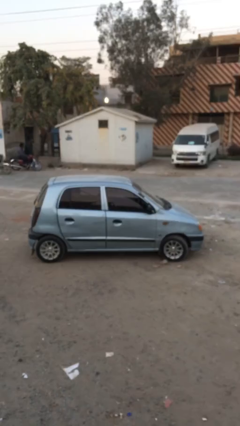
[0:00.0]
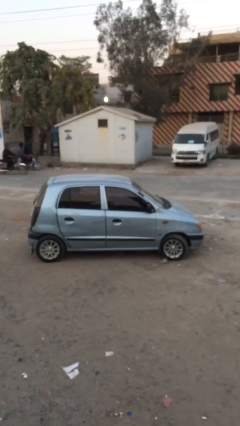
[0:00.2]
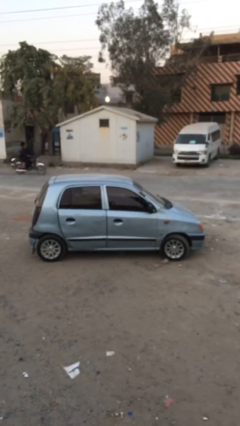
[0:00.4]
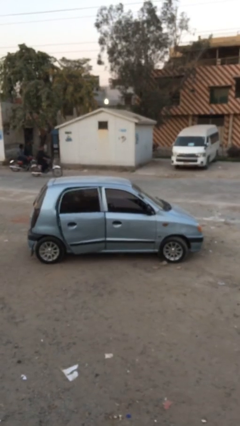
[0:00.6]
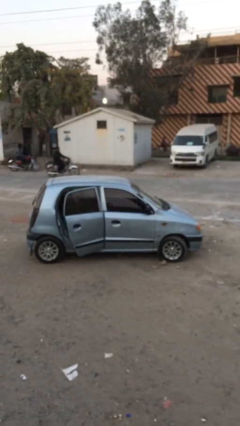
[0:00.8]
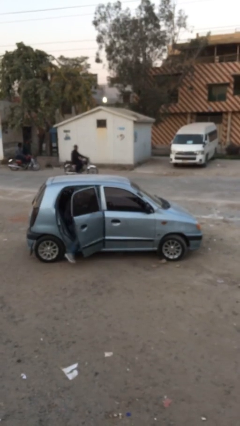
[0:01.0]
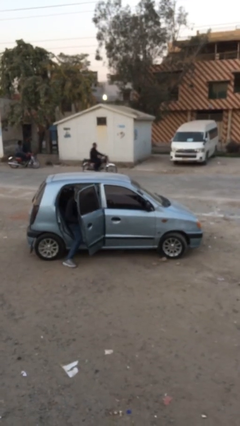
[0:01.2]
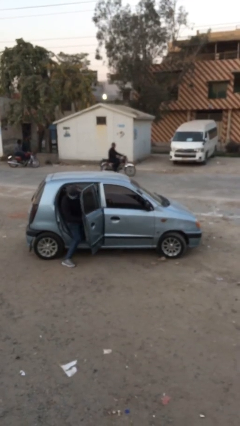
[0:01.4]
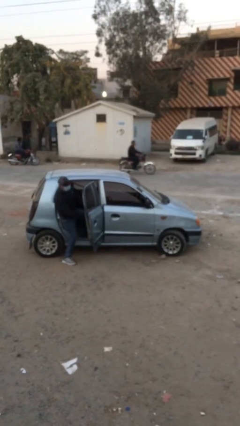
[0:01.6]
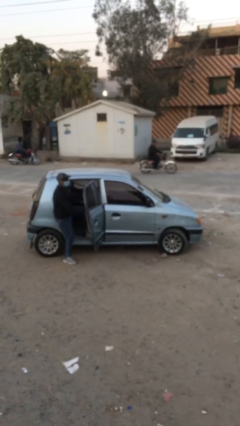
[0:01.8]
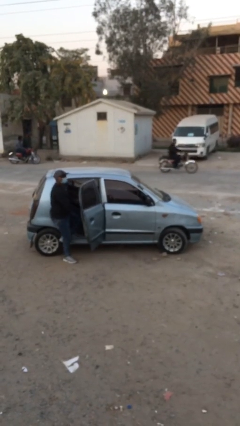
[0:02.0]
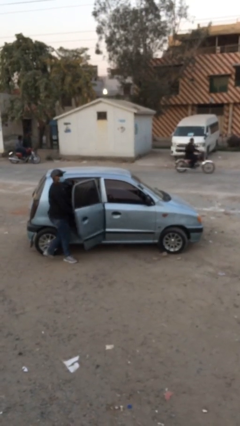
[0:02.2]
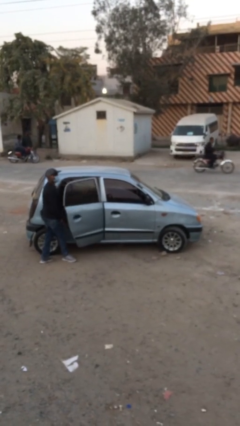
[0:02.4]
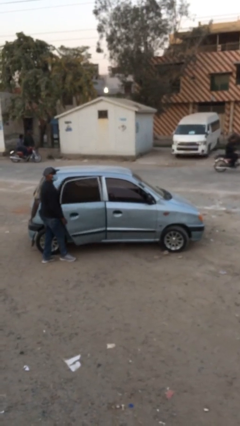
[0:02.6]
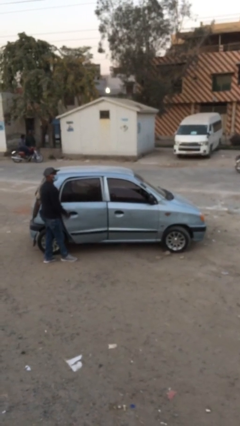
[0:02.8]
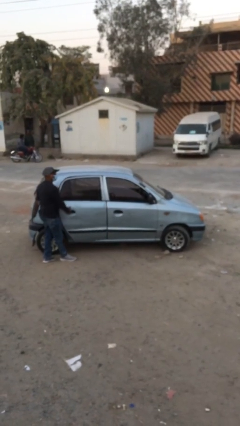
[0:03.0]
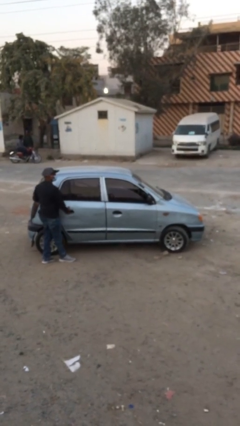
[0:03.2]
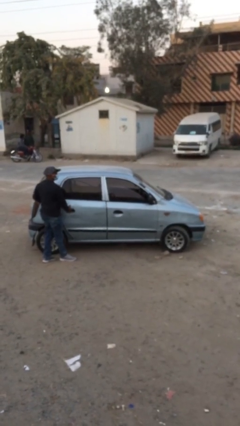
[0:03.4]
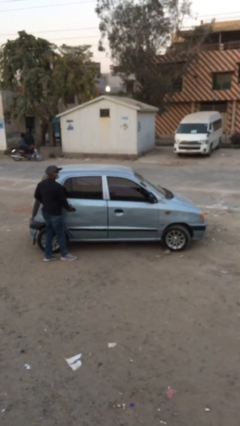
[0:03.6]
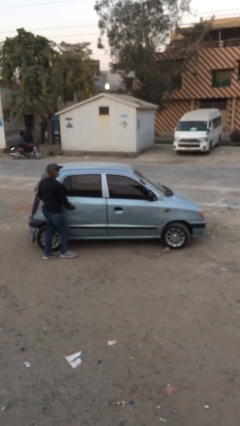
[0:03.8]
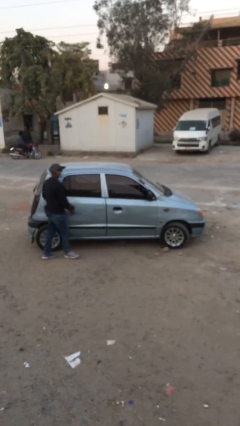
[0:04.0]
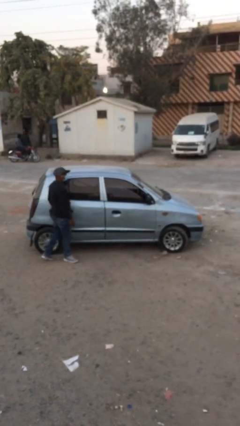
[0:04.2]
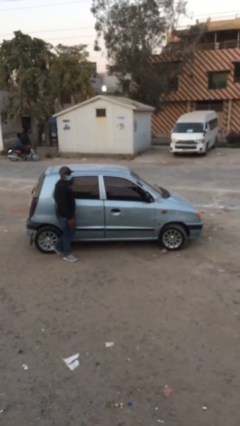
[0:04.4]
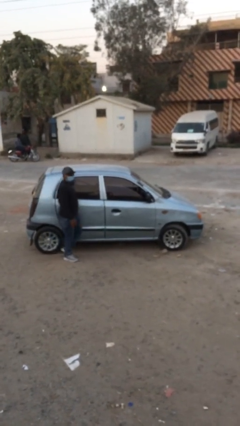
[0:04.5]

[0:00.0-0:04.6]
car drops off person

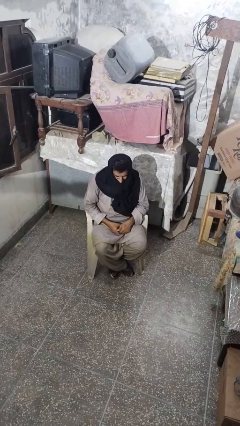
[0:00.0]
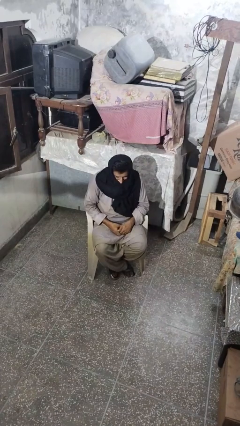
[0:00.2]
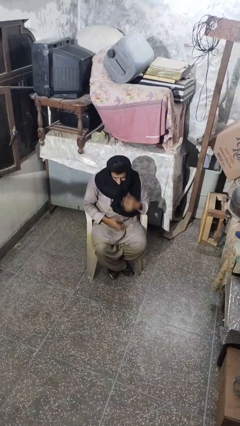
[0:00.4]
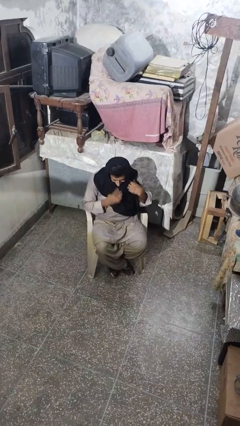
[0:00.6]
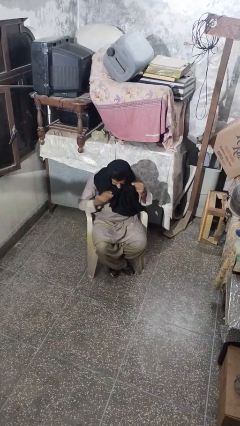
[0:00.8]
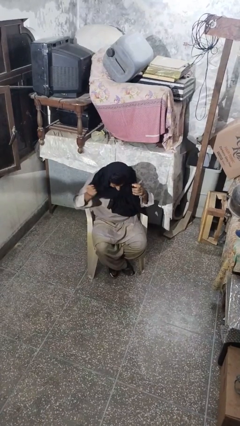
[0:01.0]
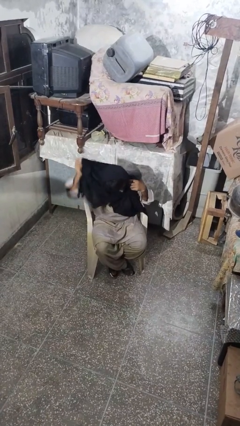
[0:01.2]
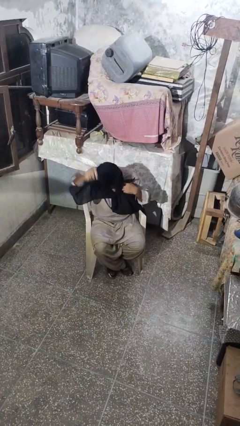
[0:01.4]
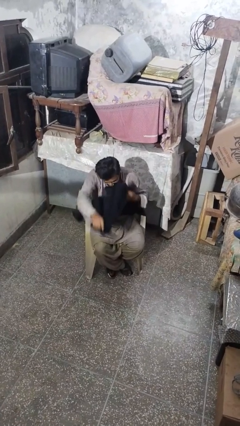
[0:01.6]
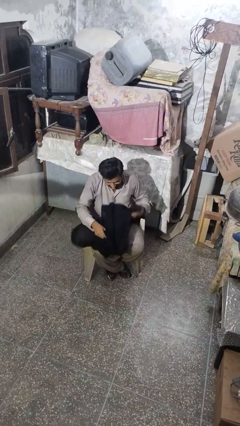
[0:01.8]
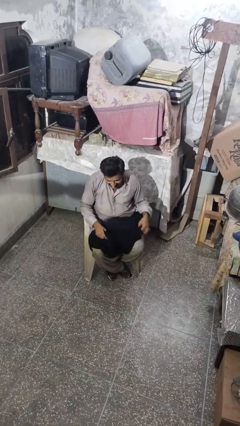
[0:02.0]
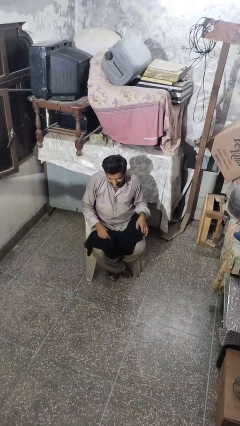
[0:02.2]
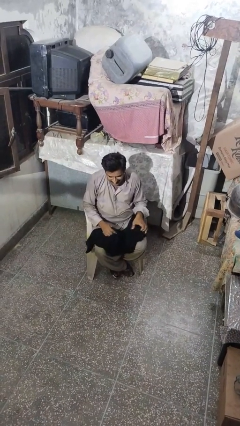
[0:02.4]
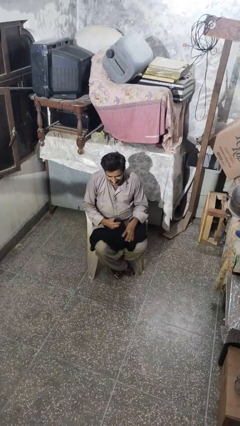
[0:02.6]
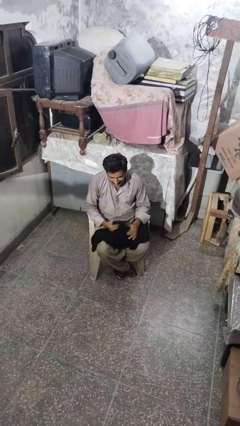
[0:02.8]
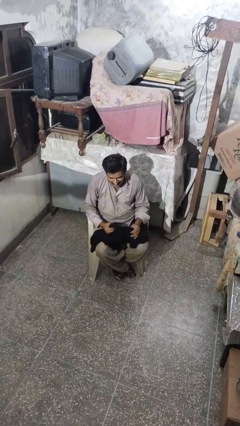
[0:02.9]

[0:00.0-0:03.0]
person takes off scarf

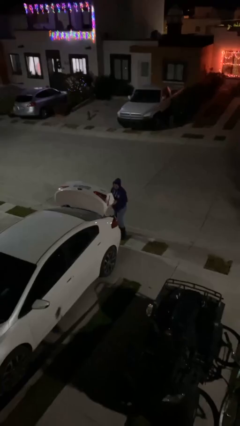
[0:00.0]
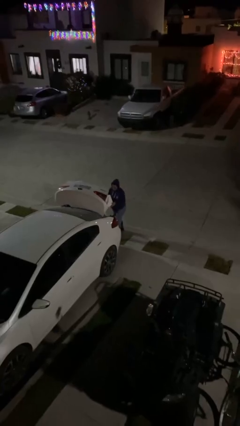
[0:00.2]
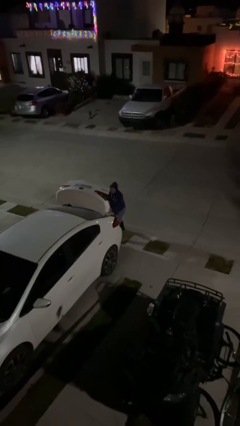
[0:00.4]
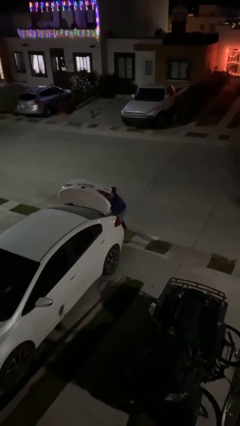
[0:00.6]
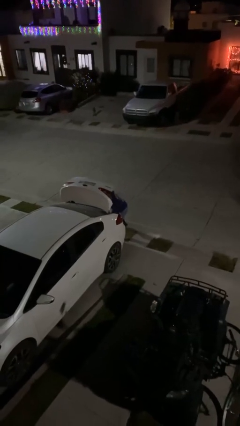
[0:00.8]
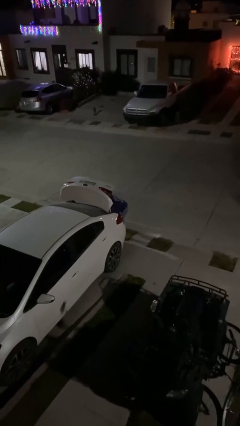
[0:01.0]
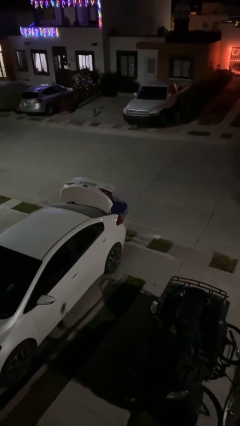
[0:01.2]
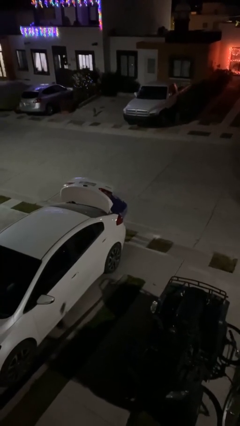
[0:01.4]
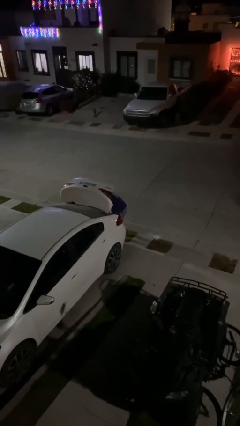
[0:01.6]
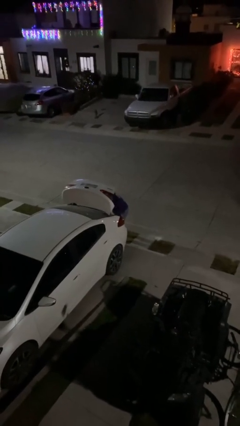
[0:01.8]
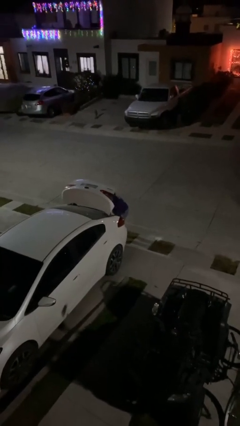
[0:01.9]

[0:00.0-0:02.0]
person loads car

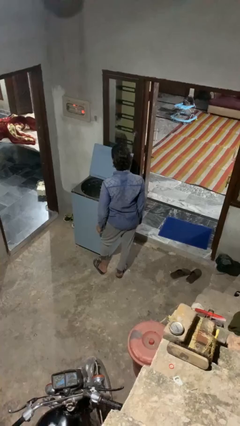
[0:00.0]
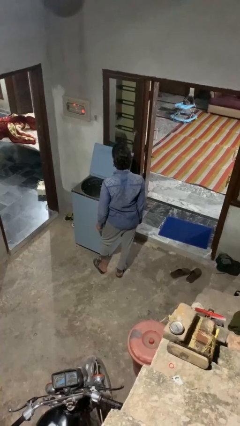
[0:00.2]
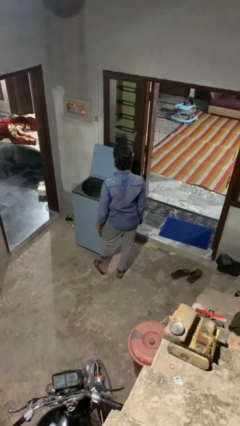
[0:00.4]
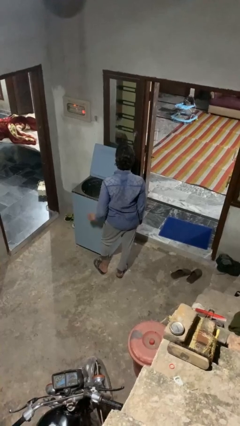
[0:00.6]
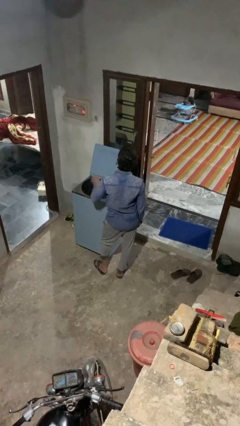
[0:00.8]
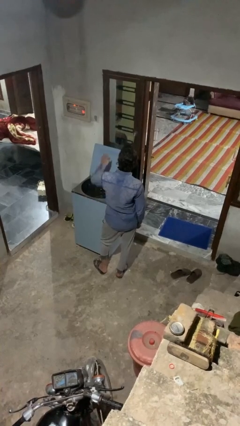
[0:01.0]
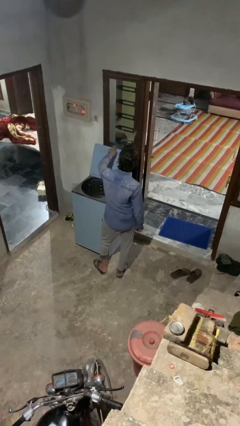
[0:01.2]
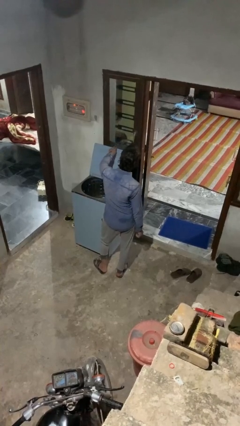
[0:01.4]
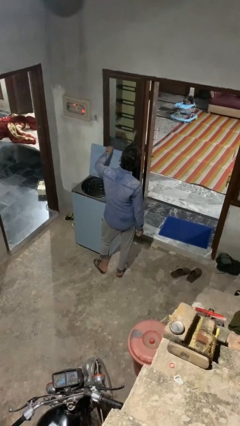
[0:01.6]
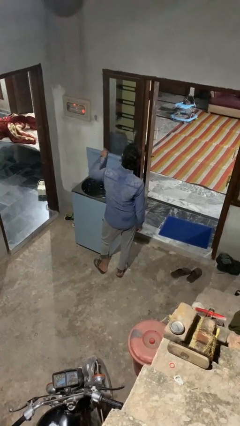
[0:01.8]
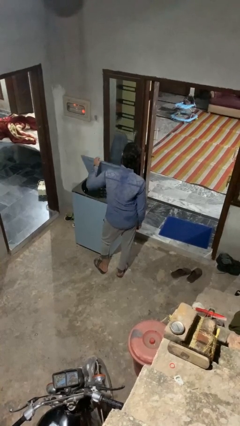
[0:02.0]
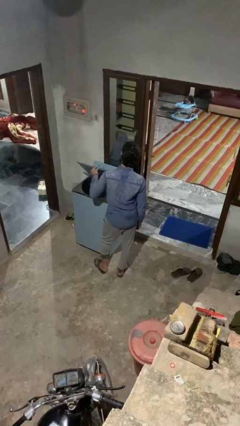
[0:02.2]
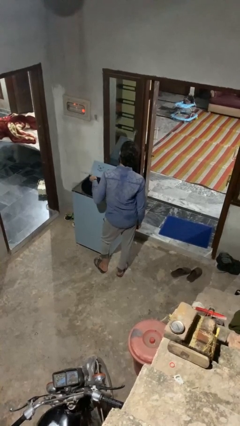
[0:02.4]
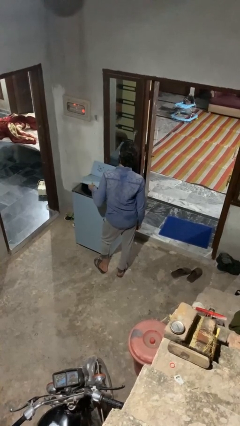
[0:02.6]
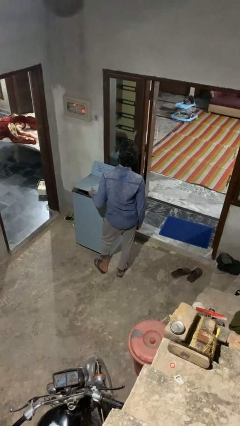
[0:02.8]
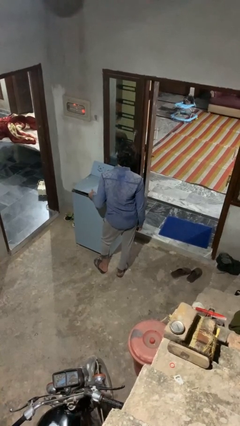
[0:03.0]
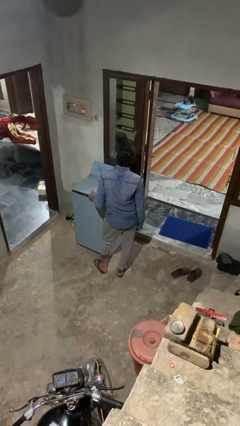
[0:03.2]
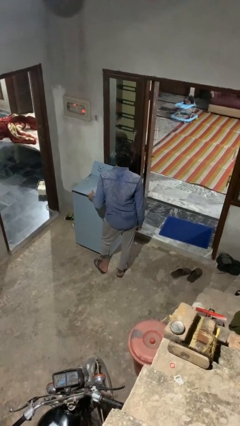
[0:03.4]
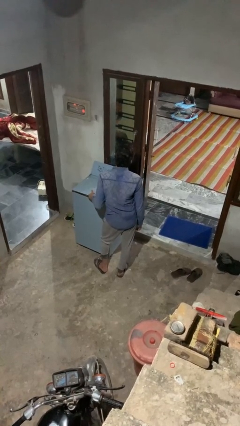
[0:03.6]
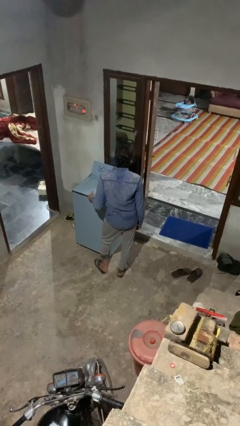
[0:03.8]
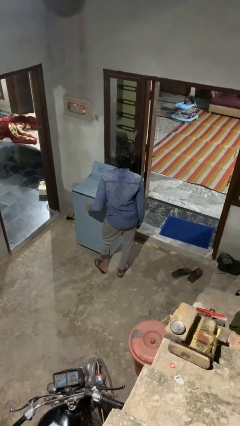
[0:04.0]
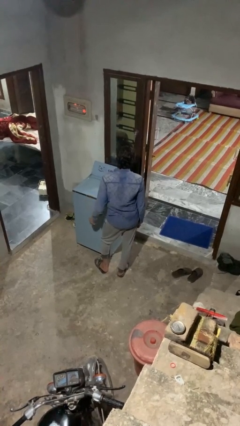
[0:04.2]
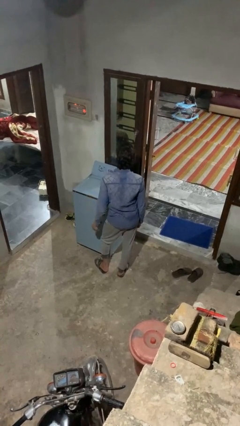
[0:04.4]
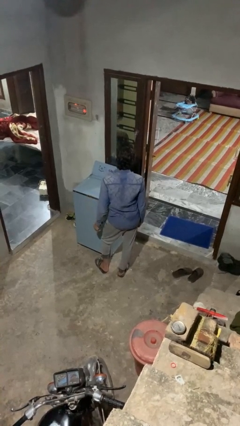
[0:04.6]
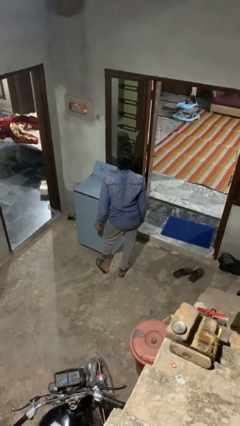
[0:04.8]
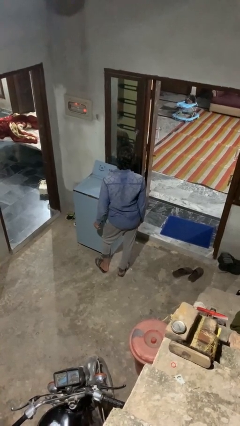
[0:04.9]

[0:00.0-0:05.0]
person closes clothes washer

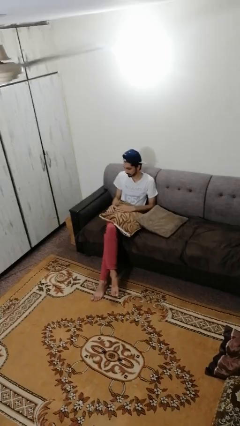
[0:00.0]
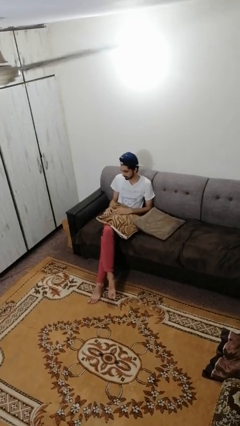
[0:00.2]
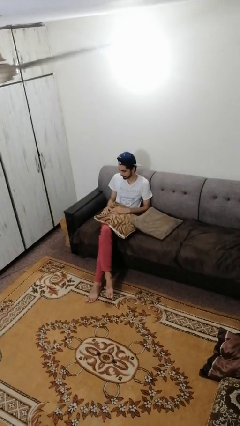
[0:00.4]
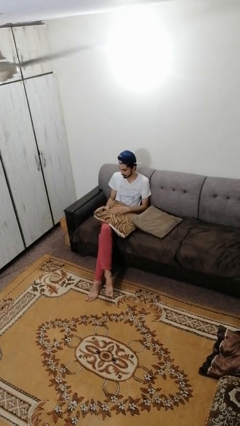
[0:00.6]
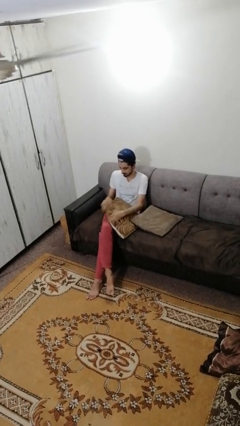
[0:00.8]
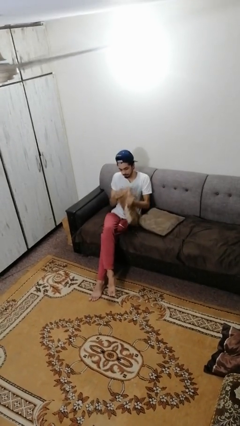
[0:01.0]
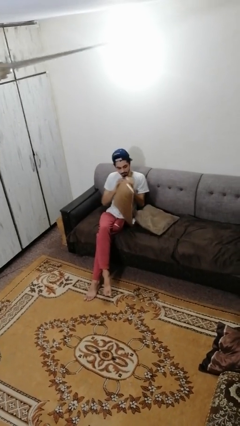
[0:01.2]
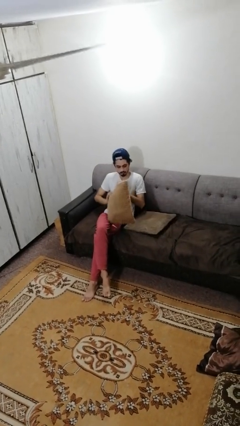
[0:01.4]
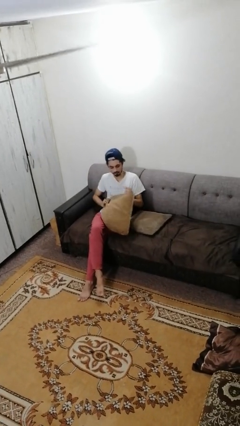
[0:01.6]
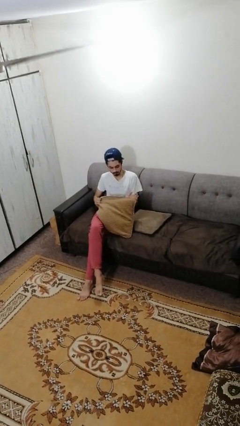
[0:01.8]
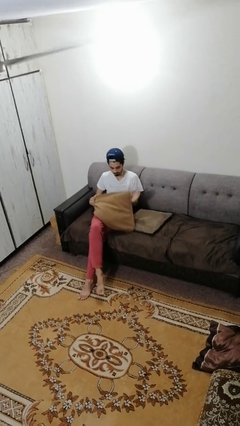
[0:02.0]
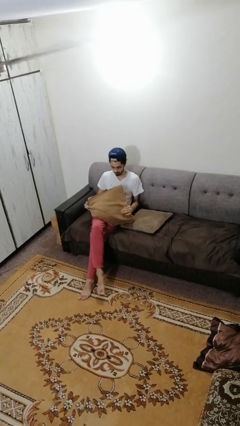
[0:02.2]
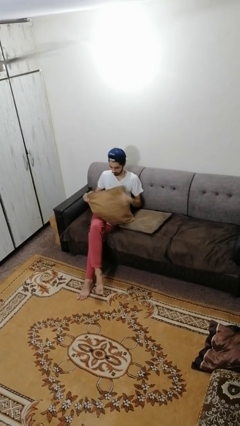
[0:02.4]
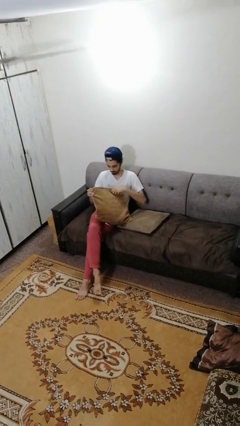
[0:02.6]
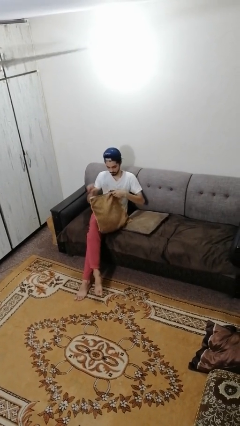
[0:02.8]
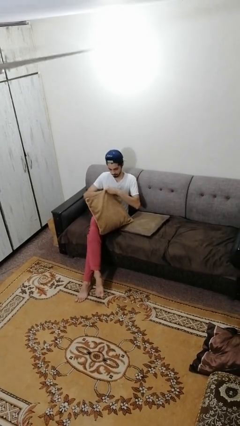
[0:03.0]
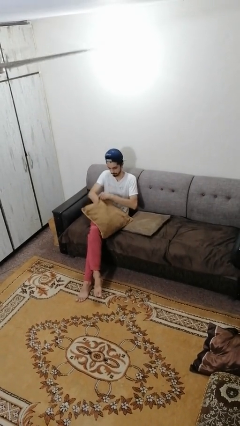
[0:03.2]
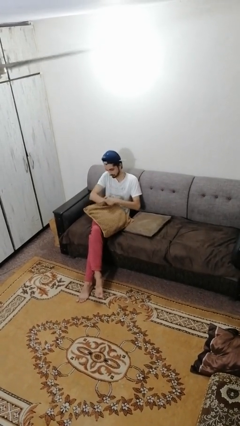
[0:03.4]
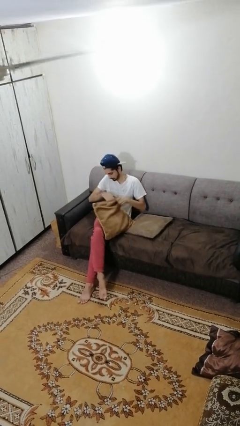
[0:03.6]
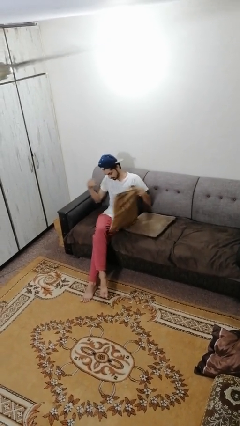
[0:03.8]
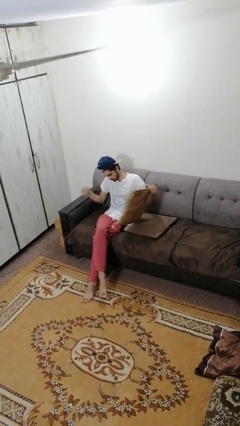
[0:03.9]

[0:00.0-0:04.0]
person searches in couch
